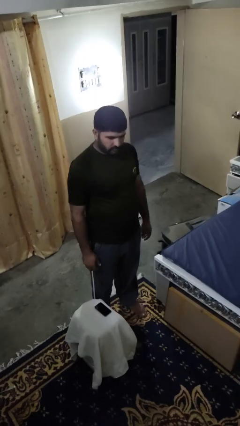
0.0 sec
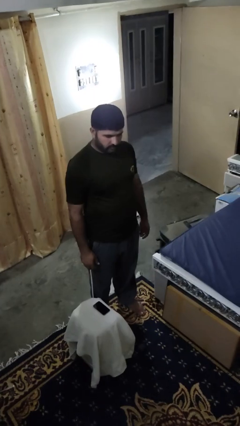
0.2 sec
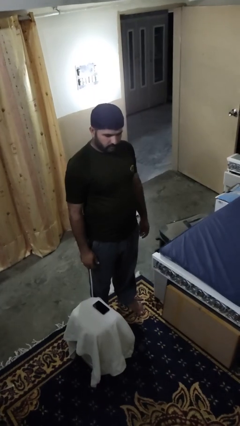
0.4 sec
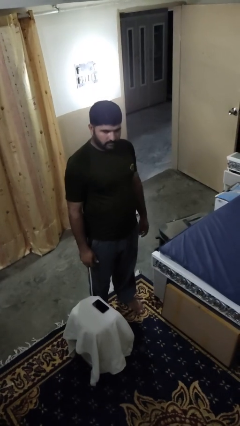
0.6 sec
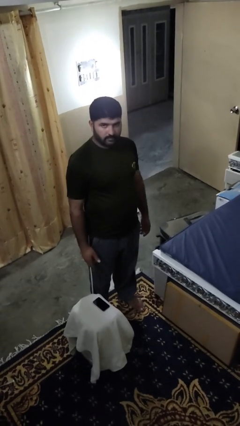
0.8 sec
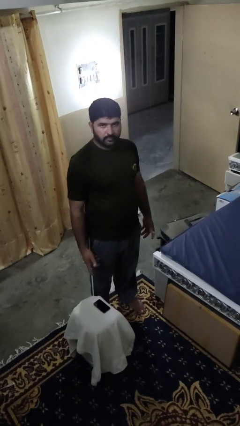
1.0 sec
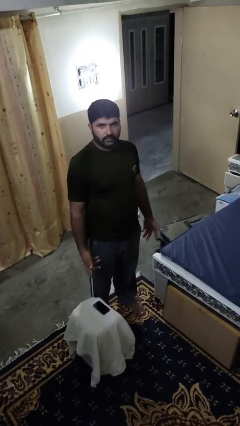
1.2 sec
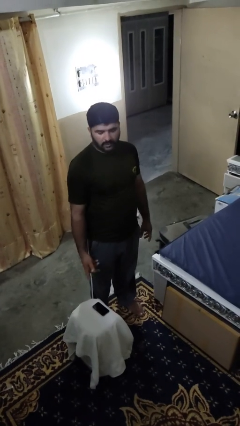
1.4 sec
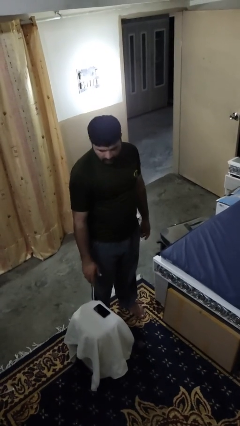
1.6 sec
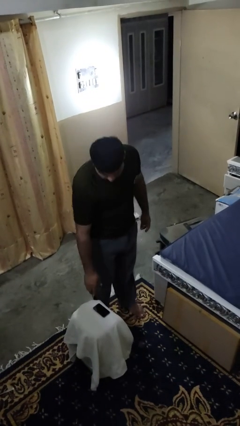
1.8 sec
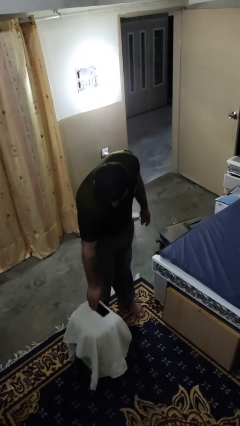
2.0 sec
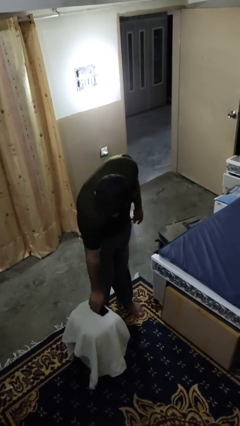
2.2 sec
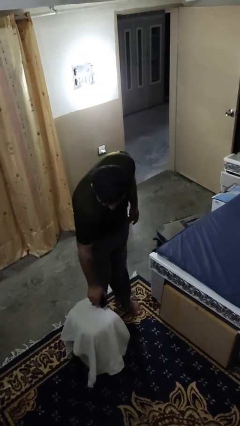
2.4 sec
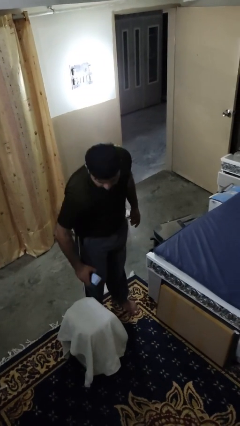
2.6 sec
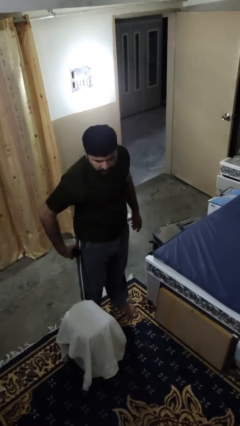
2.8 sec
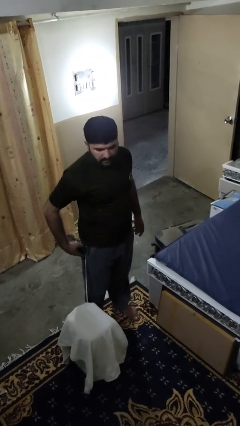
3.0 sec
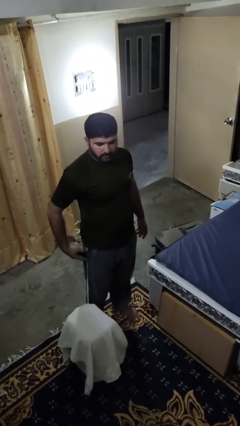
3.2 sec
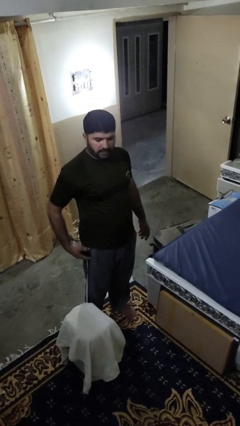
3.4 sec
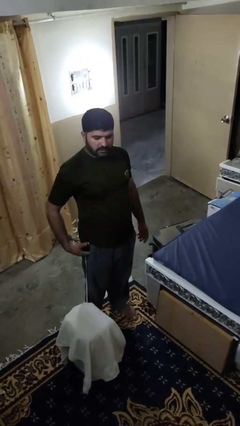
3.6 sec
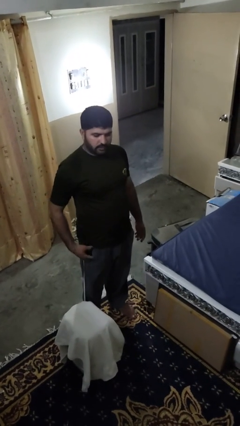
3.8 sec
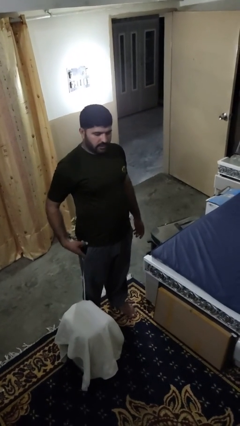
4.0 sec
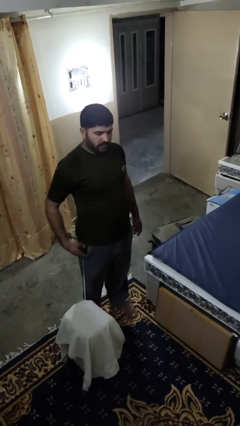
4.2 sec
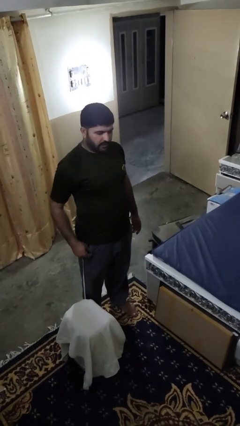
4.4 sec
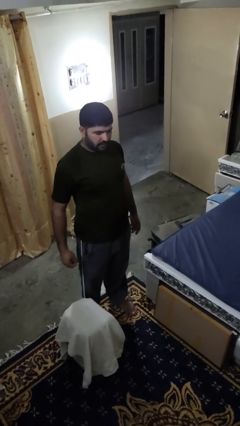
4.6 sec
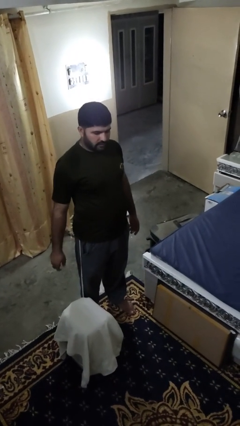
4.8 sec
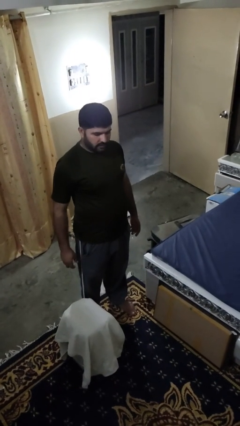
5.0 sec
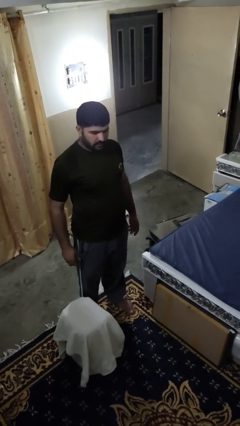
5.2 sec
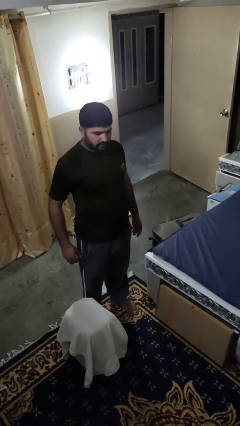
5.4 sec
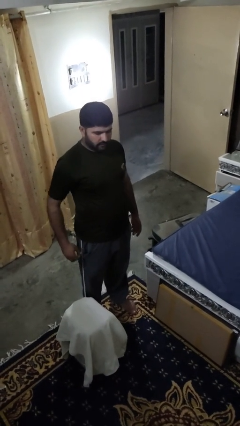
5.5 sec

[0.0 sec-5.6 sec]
person takes phone from pocket

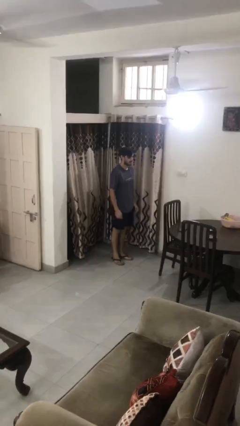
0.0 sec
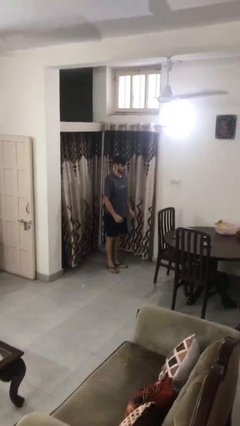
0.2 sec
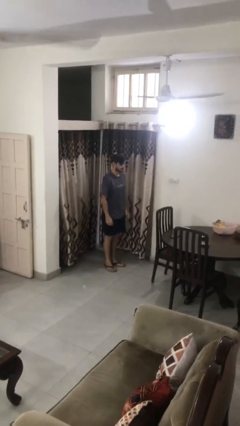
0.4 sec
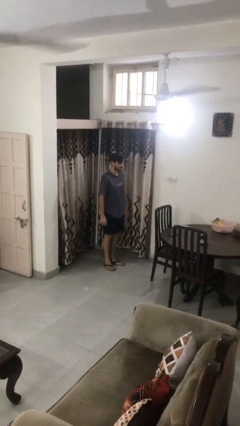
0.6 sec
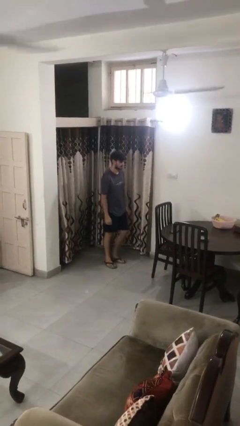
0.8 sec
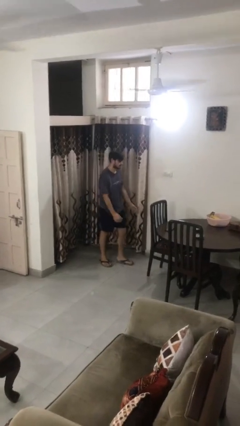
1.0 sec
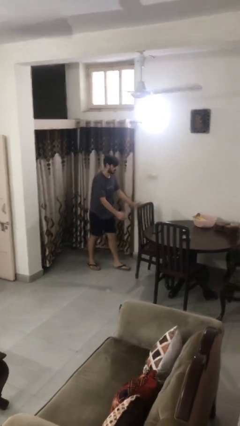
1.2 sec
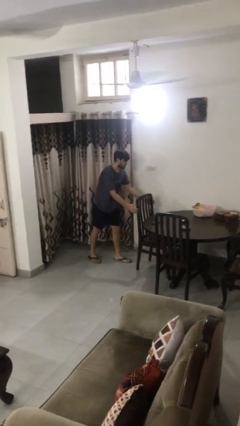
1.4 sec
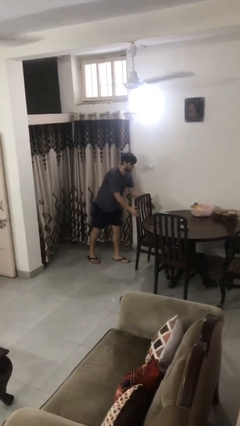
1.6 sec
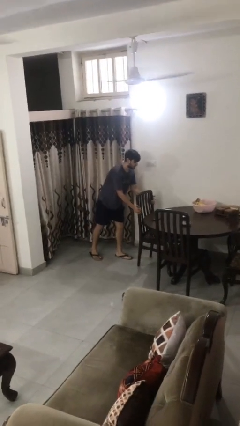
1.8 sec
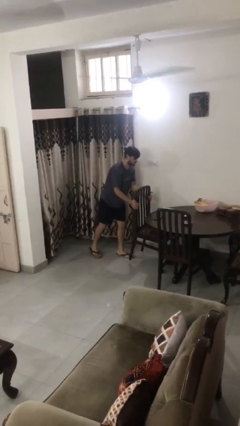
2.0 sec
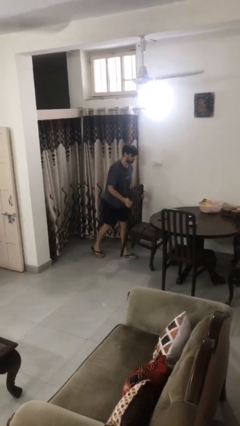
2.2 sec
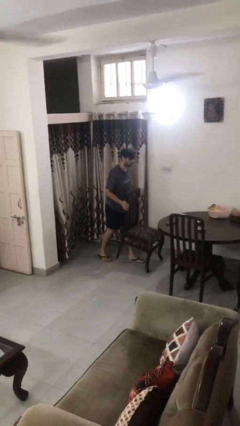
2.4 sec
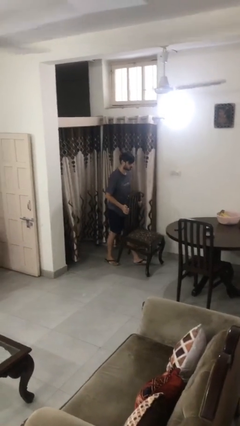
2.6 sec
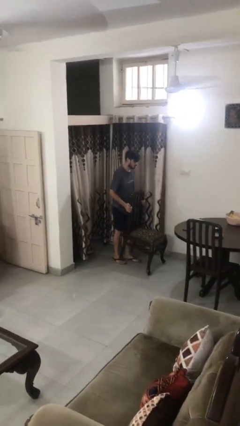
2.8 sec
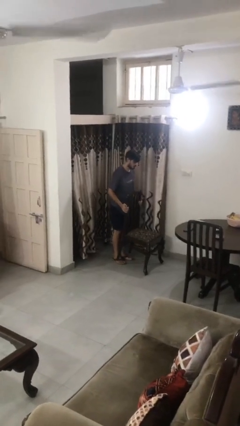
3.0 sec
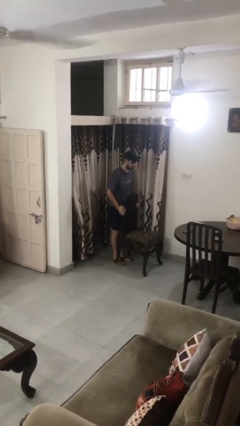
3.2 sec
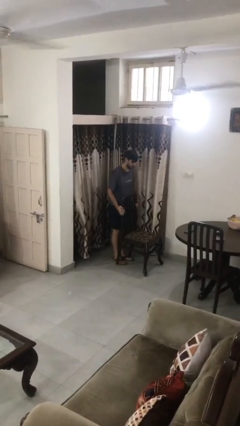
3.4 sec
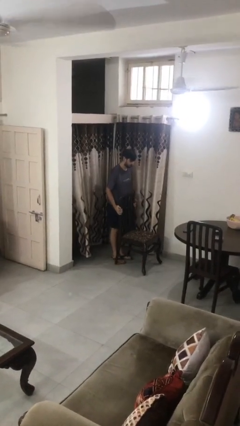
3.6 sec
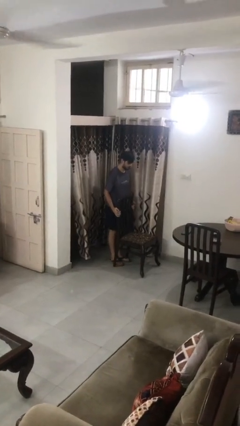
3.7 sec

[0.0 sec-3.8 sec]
person pulls out chair

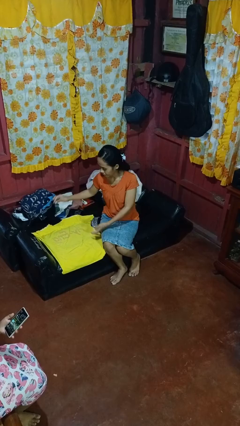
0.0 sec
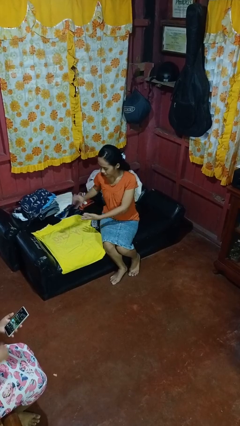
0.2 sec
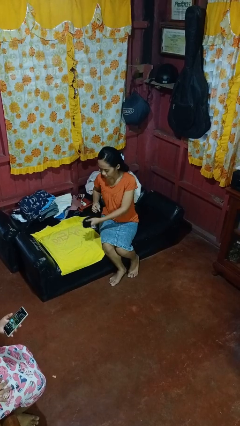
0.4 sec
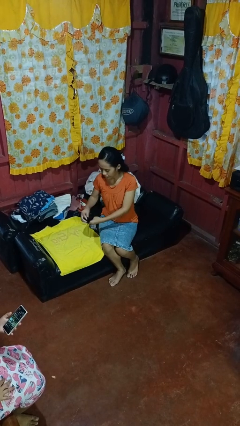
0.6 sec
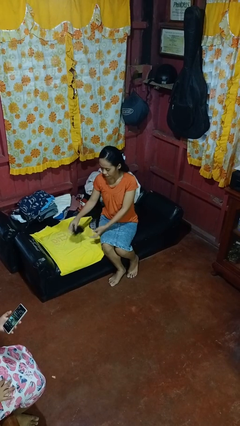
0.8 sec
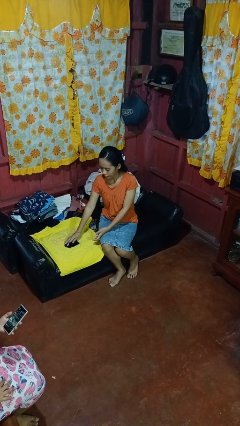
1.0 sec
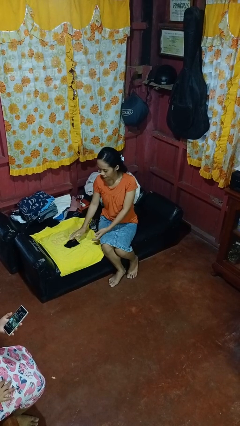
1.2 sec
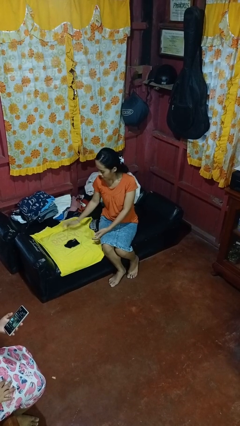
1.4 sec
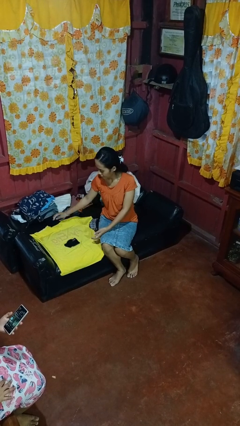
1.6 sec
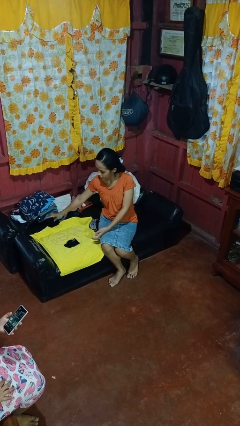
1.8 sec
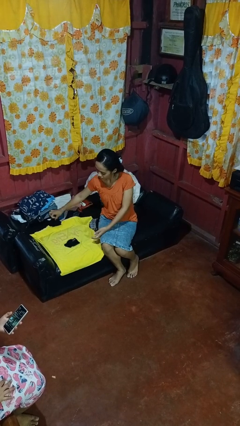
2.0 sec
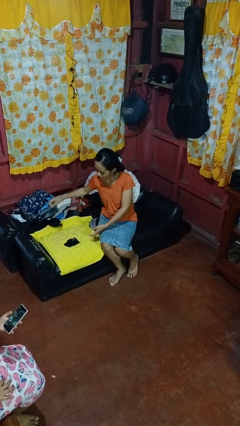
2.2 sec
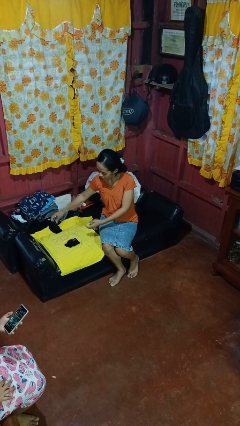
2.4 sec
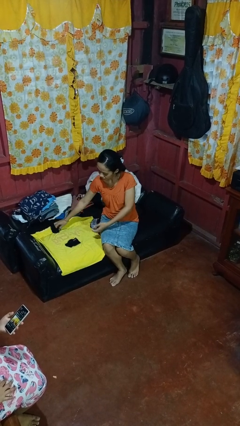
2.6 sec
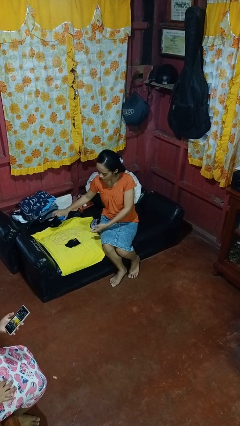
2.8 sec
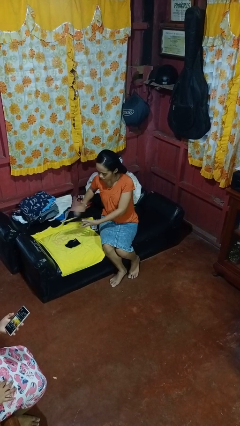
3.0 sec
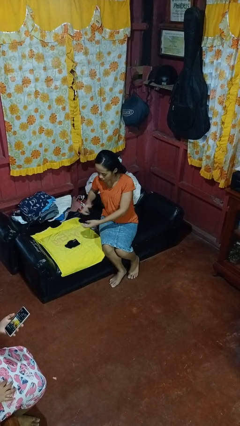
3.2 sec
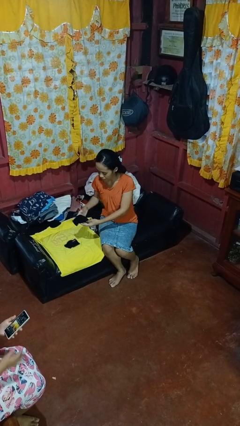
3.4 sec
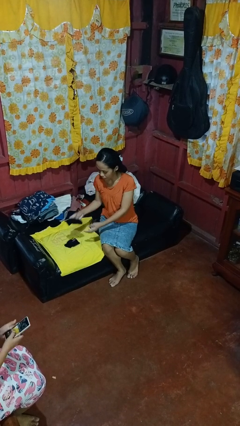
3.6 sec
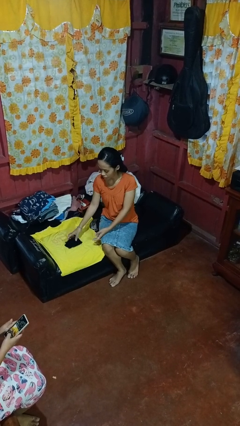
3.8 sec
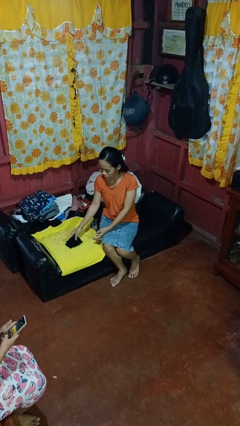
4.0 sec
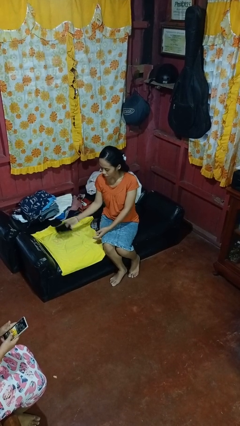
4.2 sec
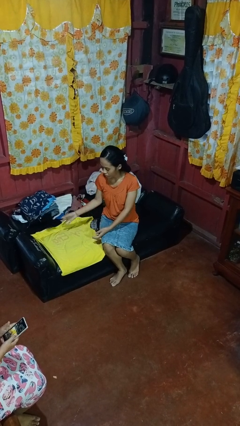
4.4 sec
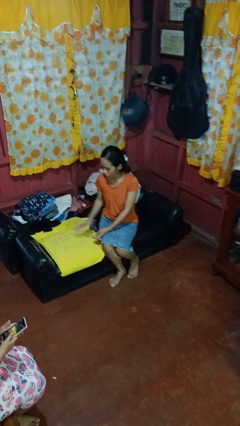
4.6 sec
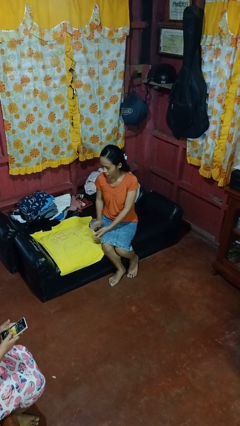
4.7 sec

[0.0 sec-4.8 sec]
person folds socks

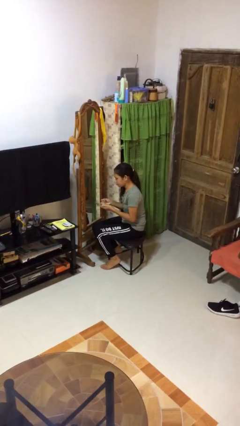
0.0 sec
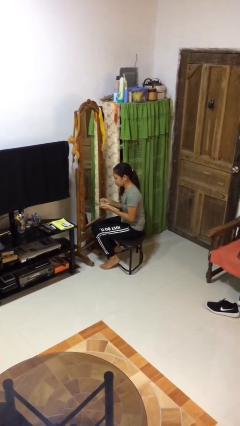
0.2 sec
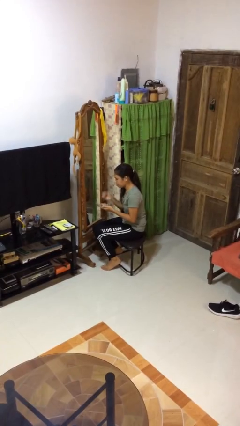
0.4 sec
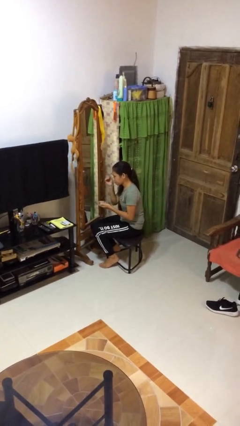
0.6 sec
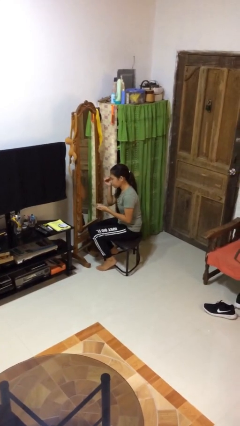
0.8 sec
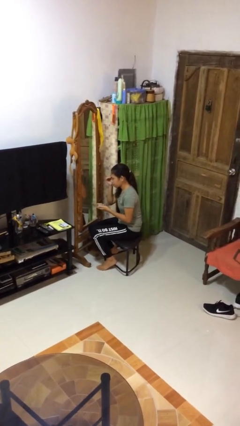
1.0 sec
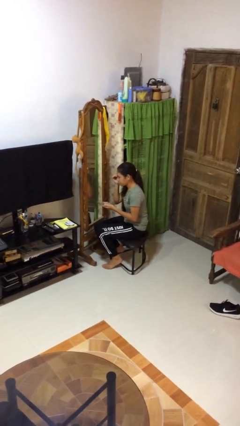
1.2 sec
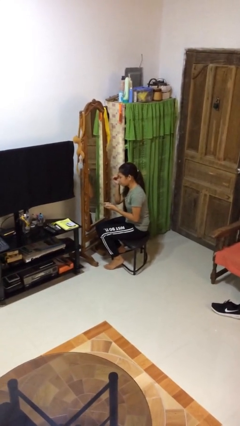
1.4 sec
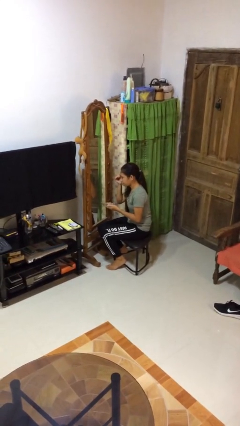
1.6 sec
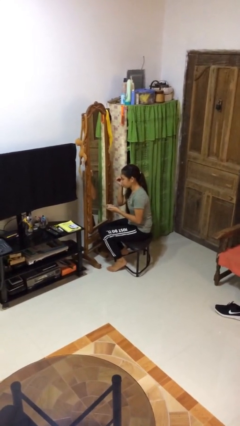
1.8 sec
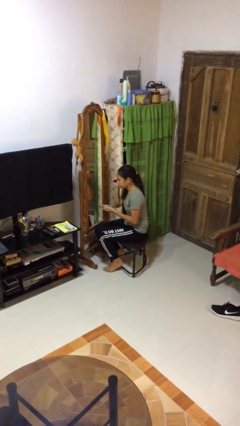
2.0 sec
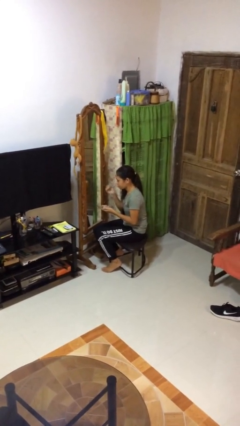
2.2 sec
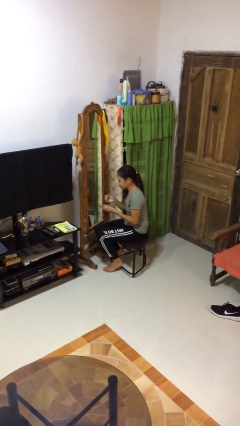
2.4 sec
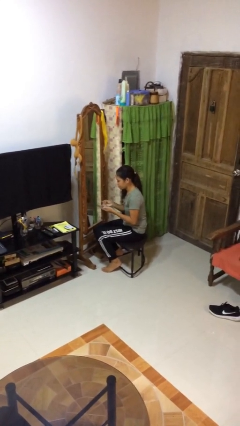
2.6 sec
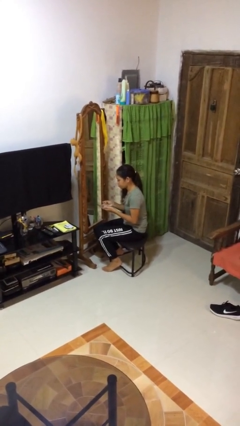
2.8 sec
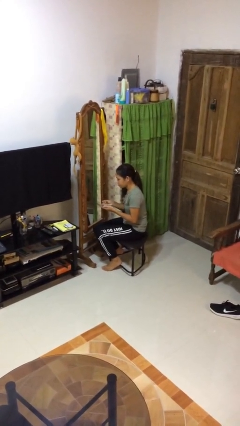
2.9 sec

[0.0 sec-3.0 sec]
person applies eye makeup

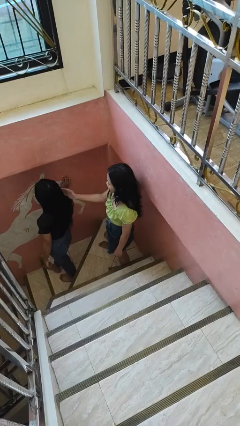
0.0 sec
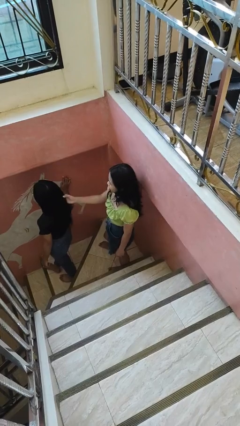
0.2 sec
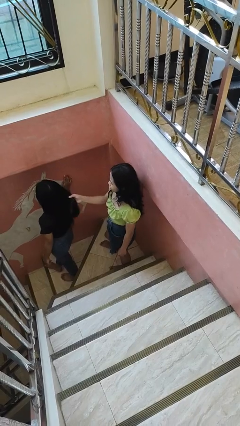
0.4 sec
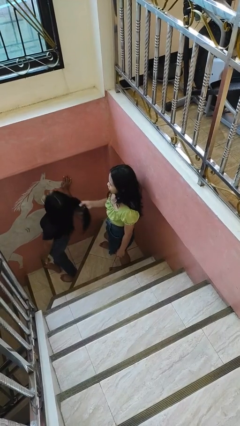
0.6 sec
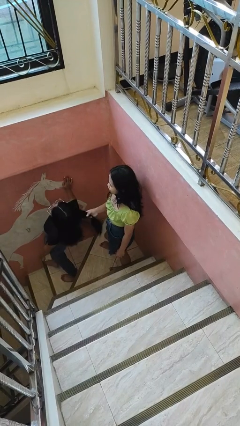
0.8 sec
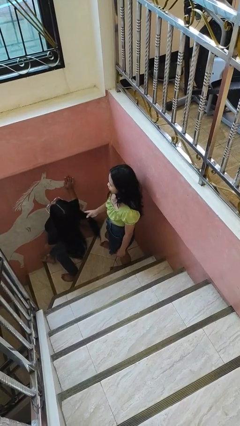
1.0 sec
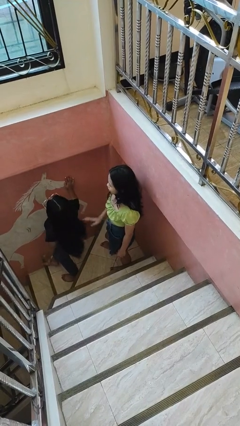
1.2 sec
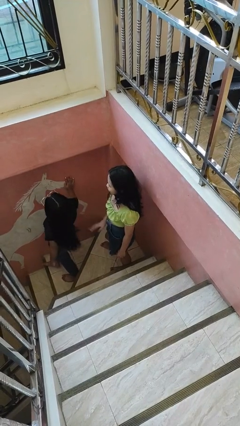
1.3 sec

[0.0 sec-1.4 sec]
person grabs person by hair
